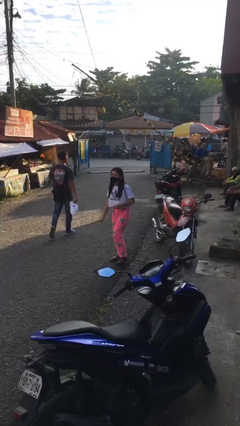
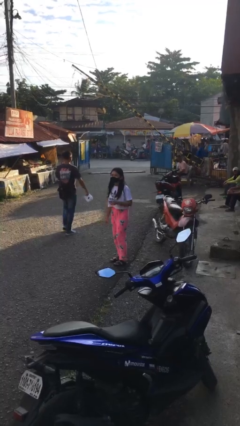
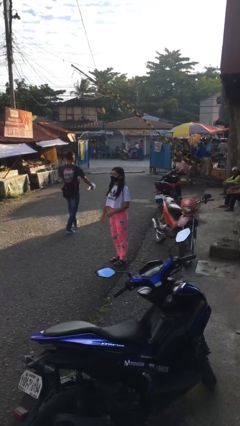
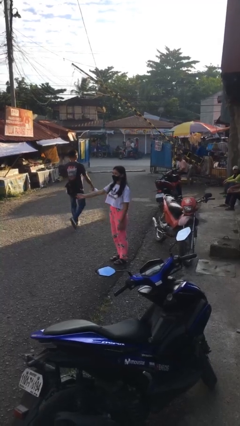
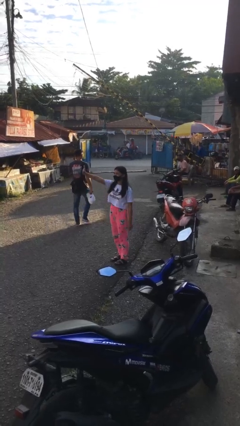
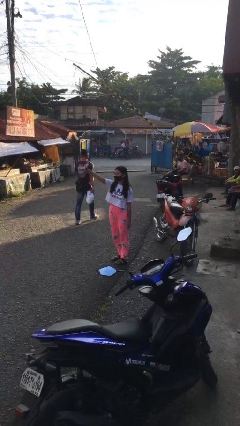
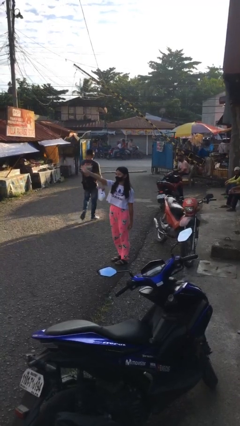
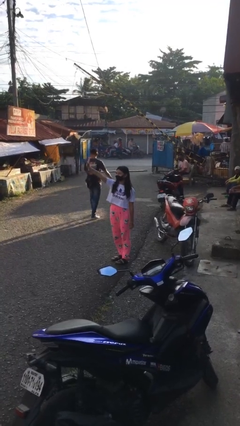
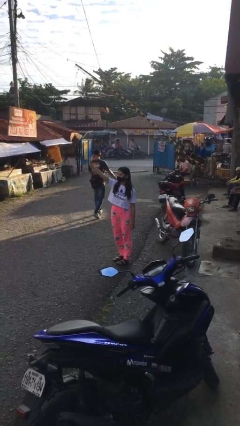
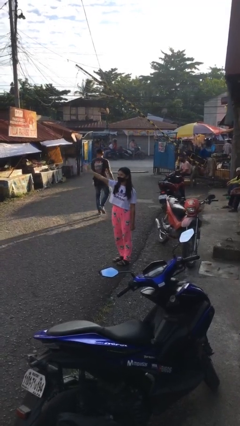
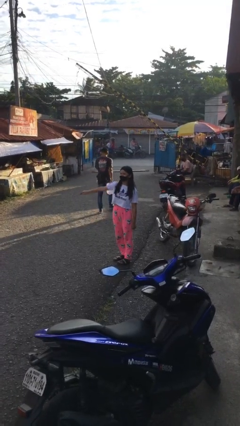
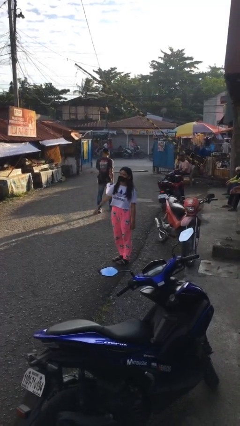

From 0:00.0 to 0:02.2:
person waves at person

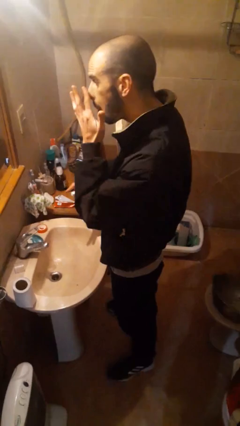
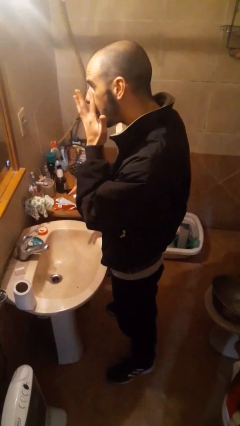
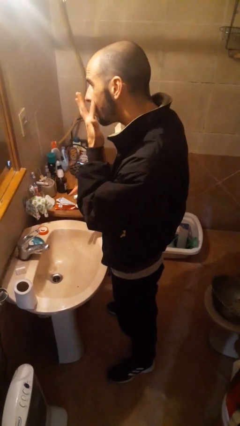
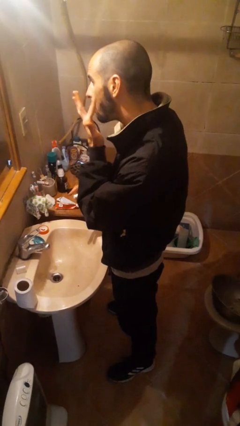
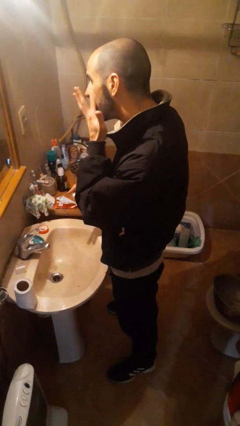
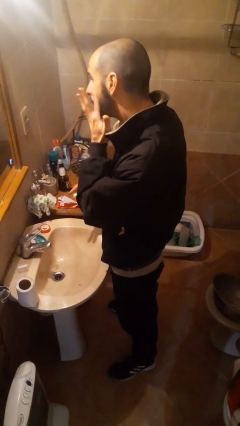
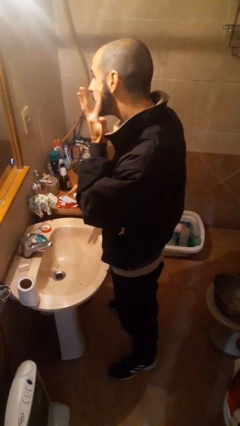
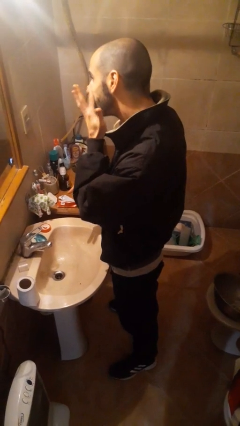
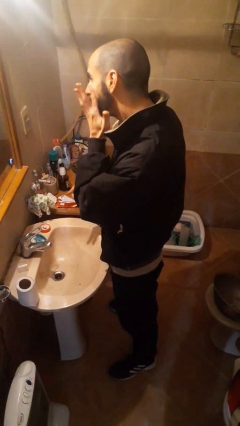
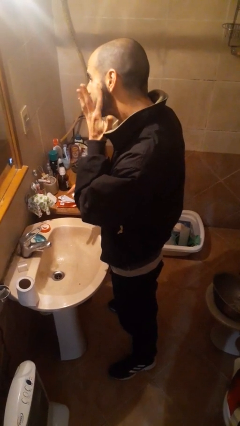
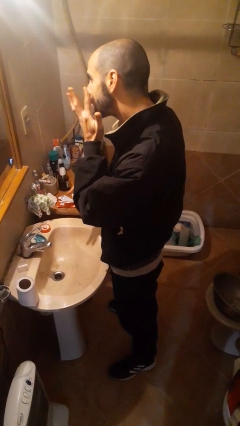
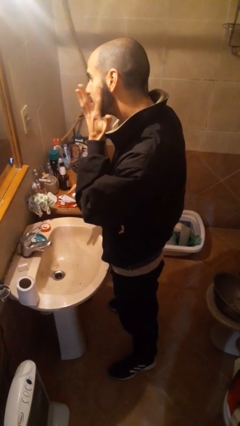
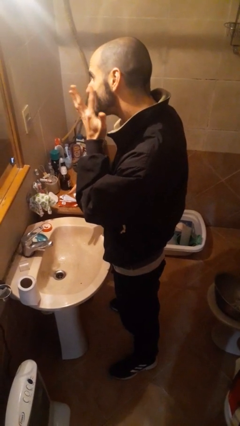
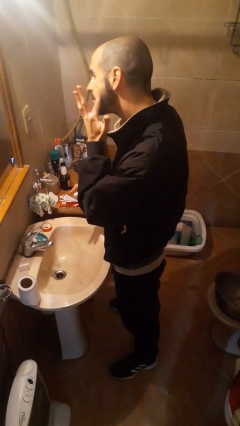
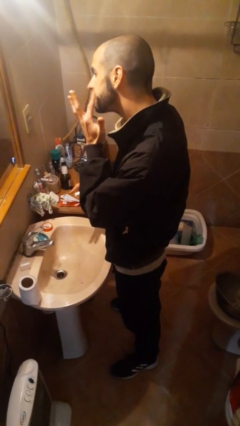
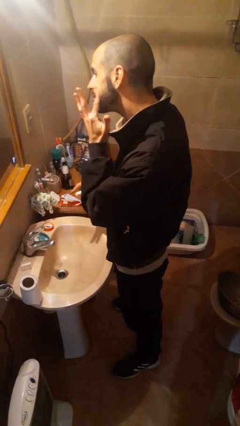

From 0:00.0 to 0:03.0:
person applies foundation makeup

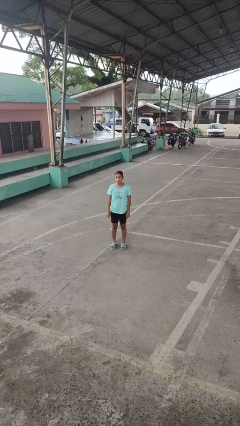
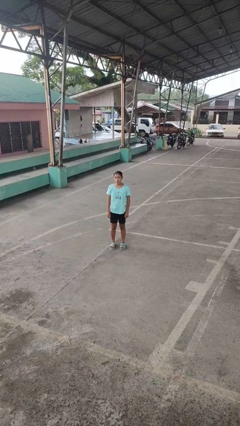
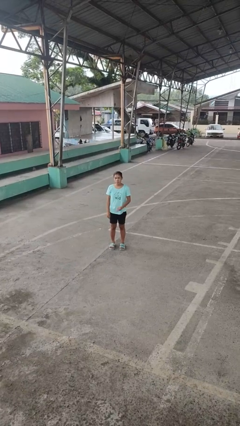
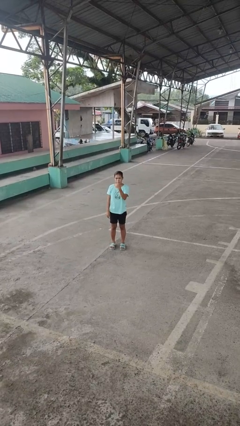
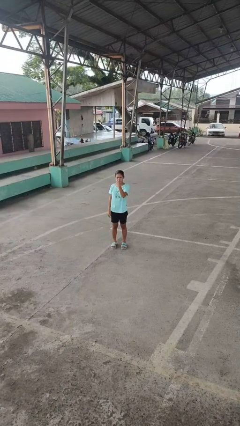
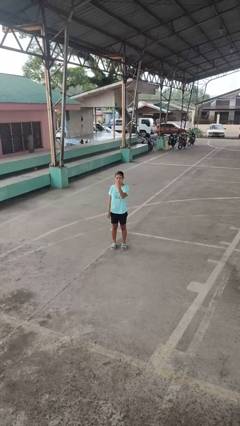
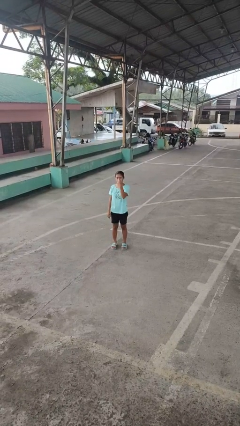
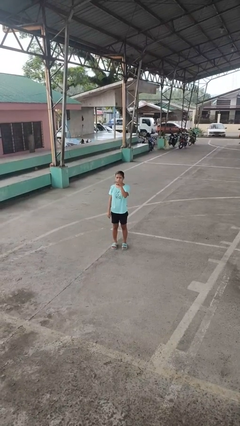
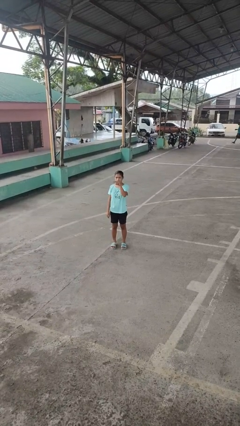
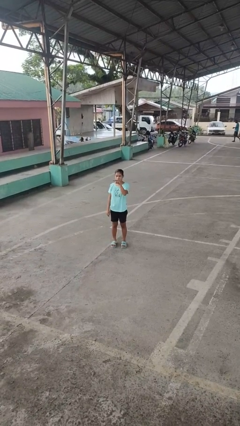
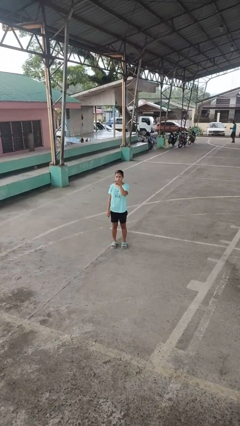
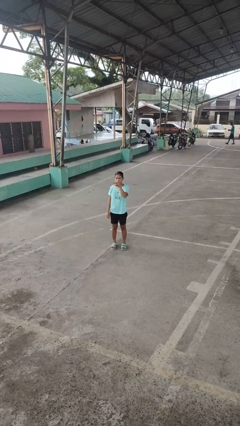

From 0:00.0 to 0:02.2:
person gestures watch closely

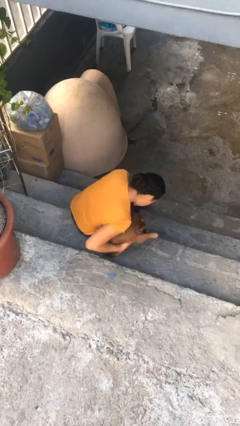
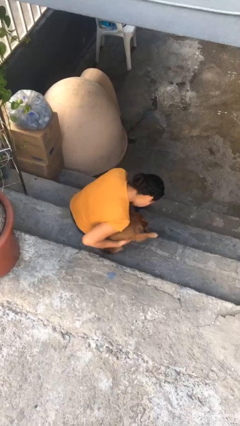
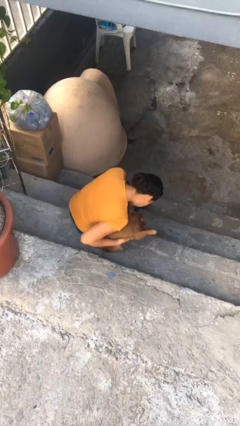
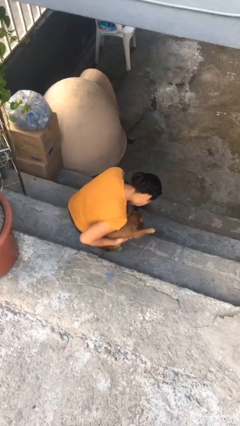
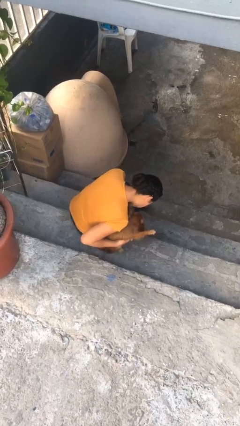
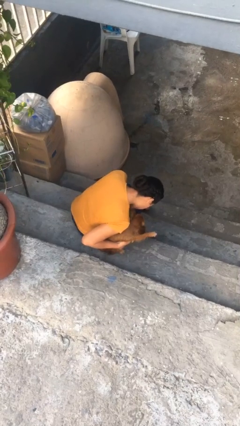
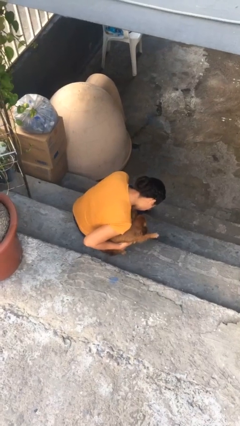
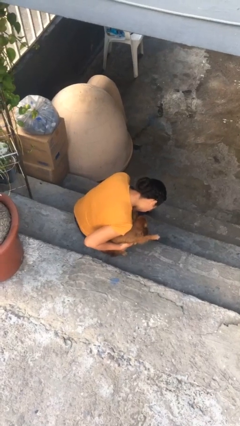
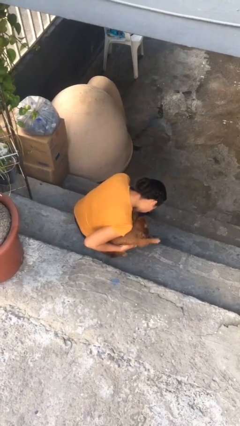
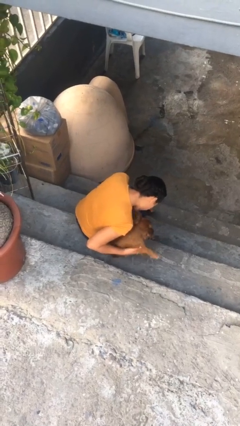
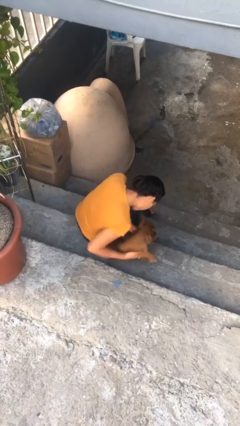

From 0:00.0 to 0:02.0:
person hugs dog

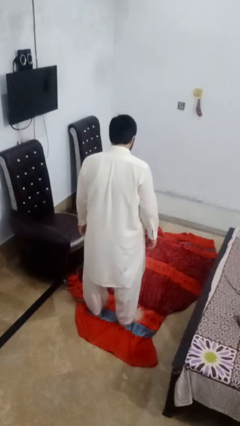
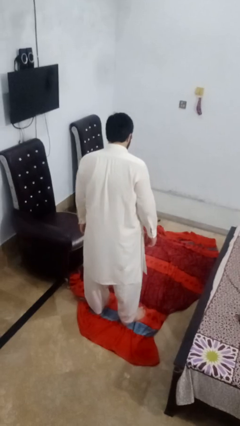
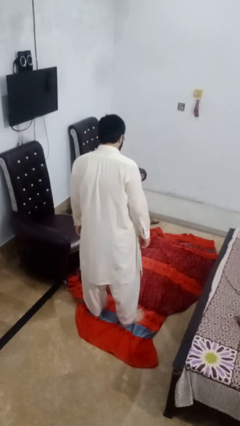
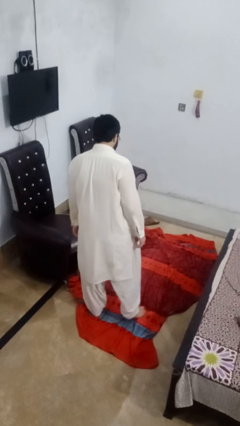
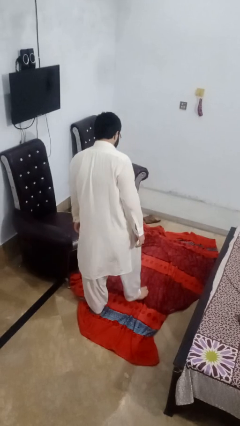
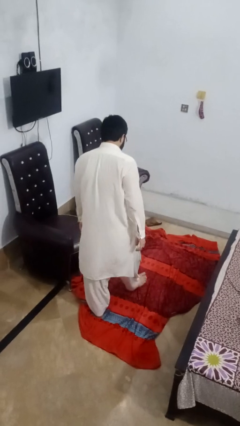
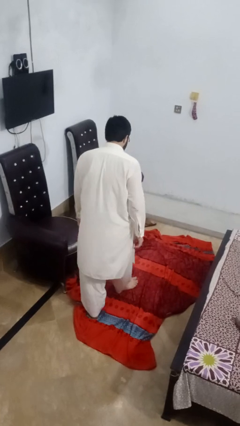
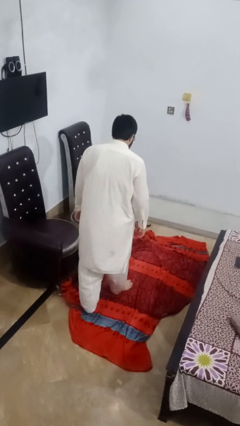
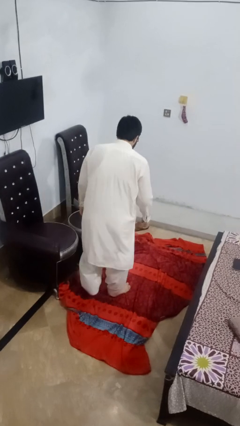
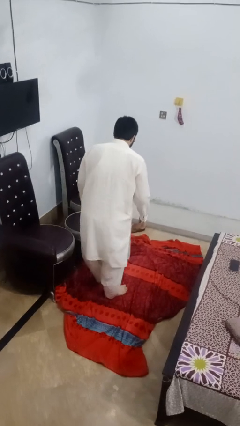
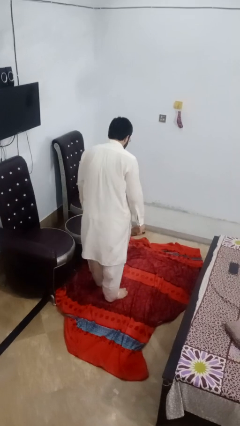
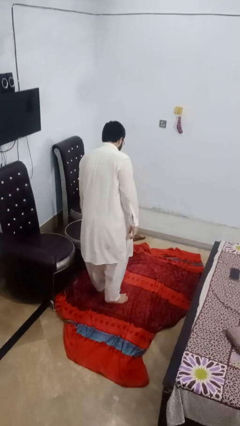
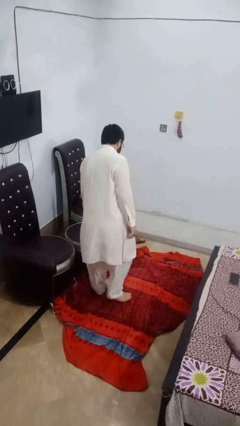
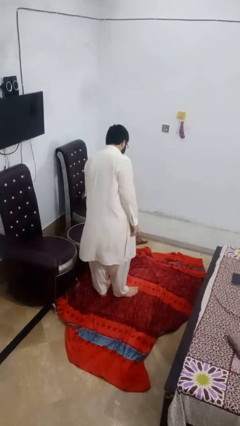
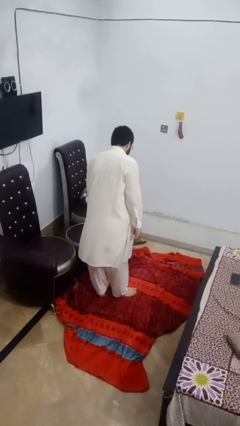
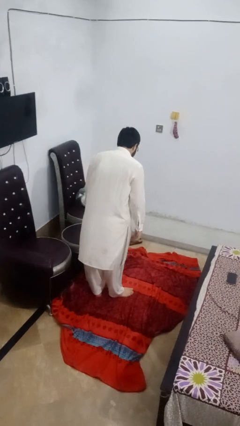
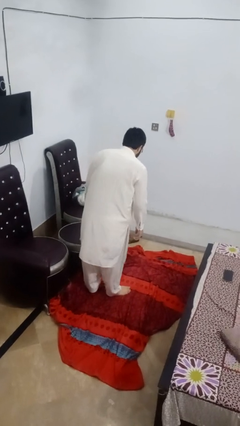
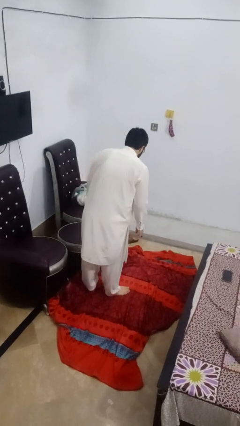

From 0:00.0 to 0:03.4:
person trips on object on floor

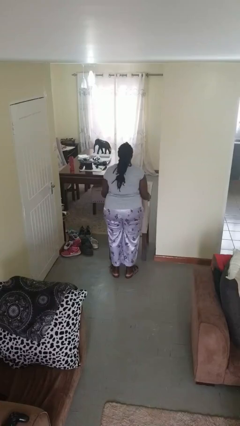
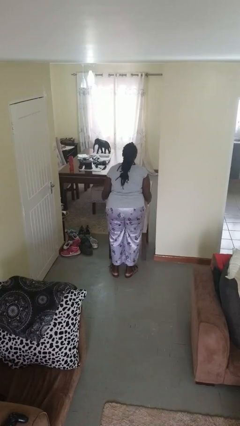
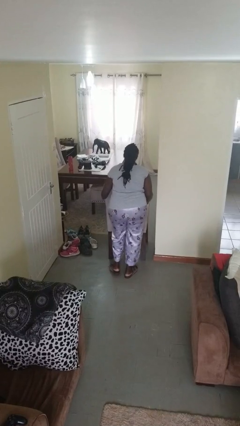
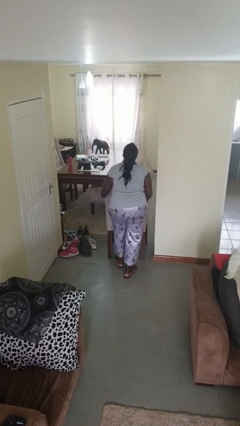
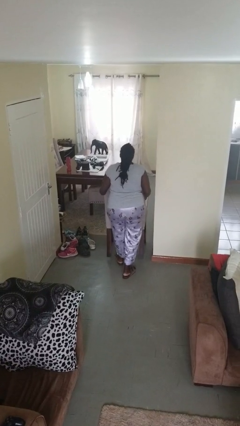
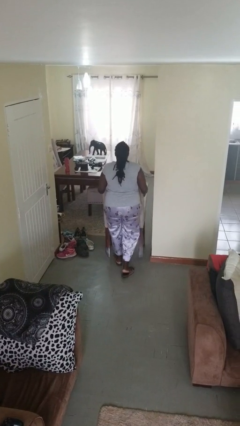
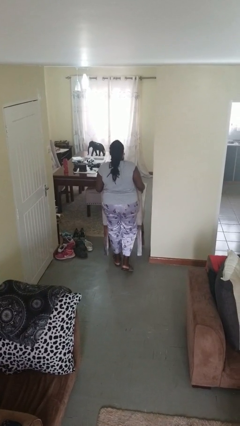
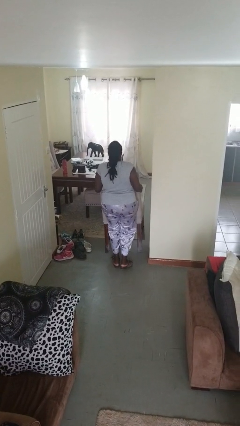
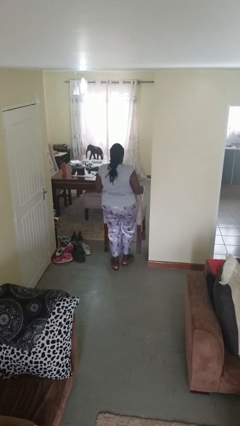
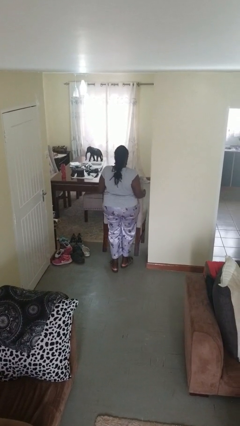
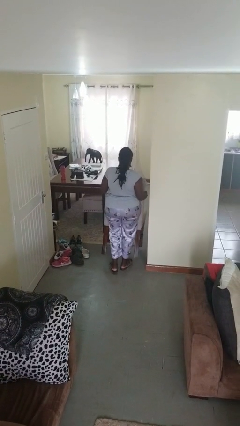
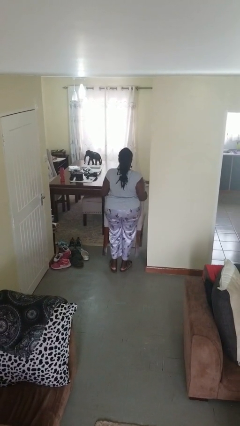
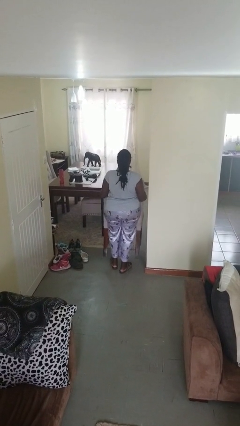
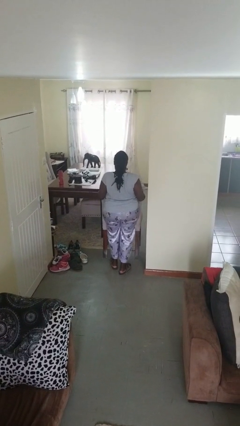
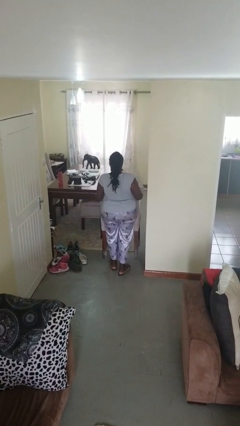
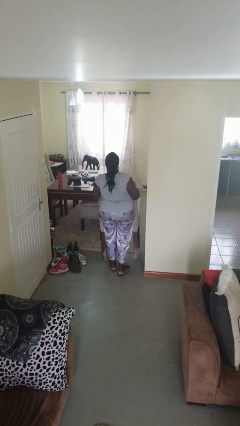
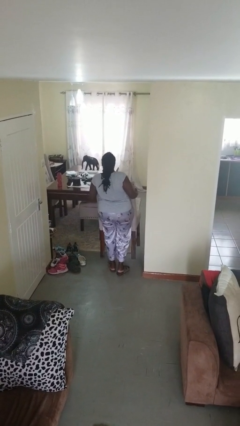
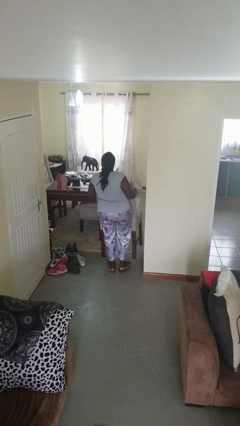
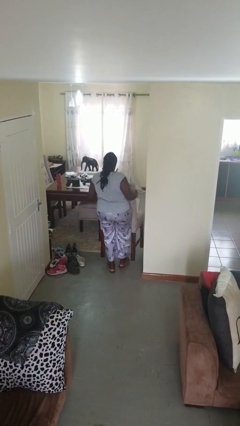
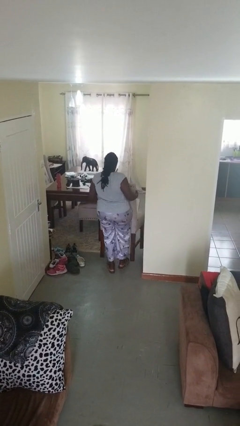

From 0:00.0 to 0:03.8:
person carries furniture

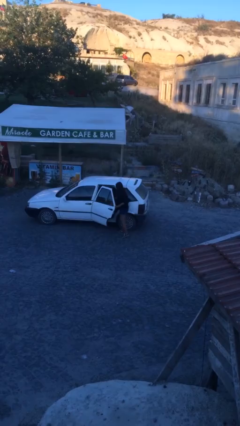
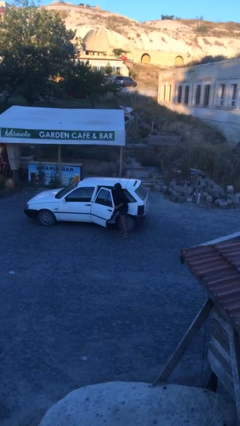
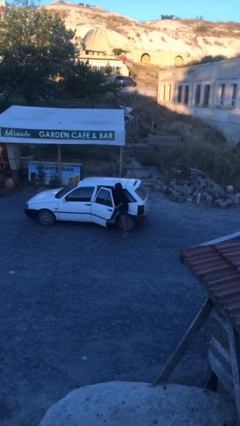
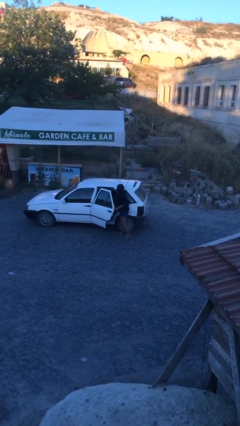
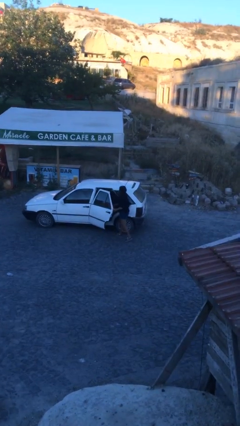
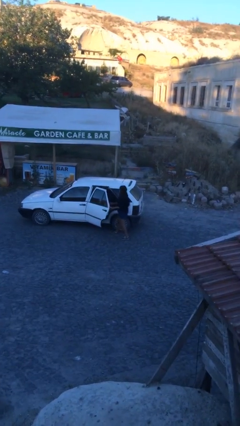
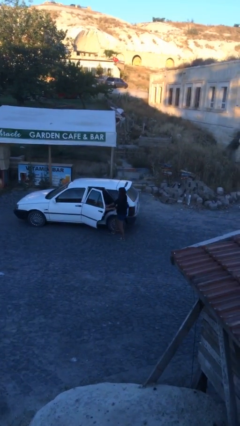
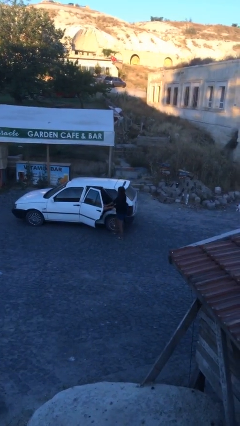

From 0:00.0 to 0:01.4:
person loads car
